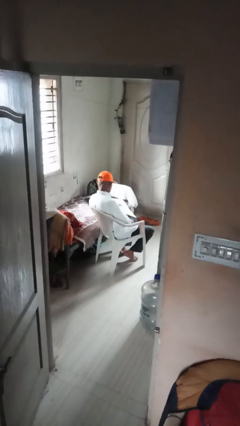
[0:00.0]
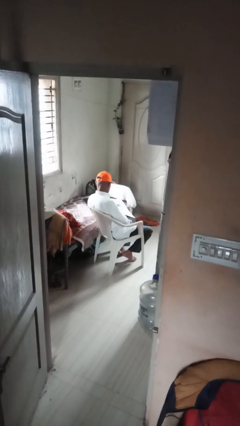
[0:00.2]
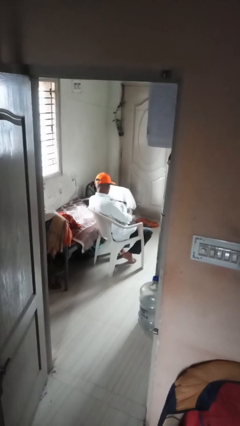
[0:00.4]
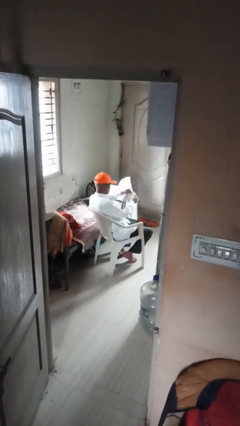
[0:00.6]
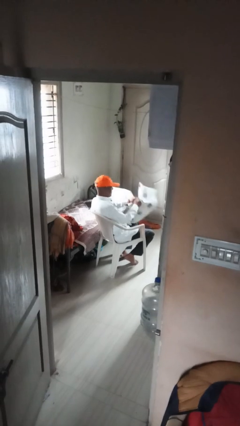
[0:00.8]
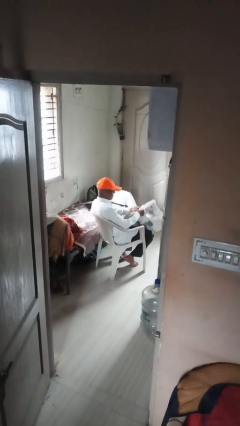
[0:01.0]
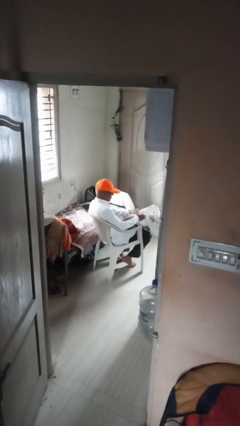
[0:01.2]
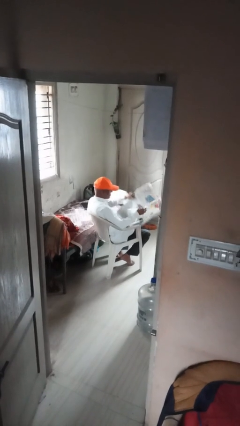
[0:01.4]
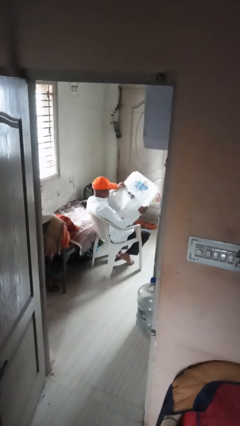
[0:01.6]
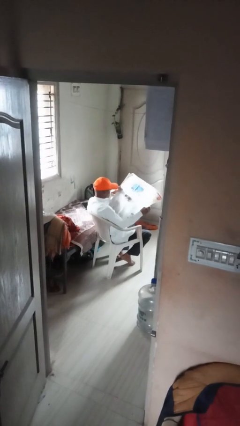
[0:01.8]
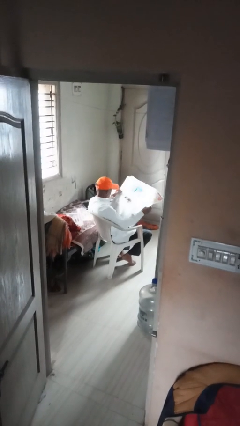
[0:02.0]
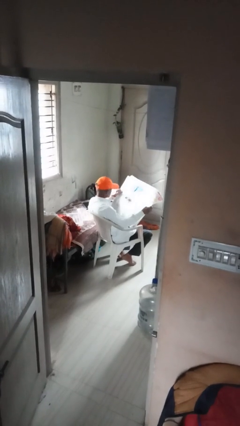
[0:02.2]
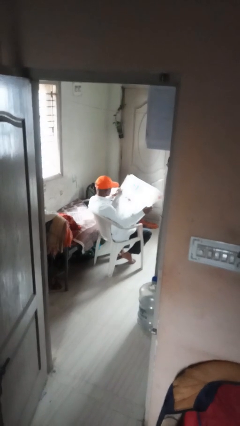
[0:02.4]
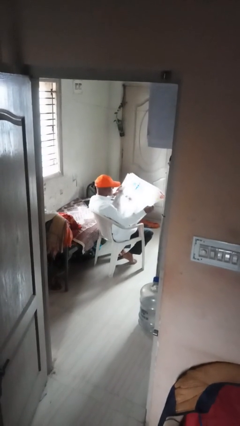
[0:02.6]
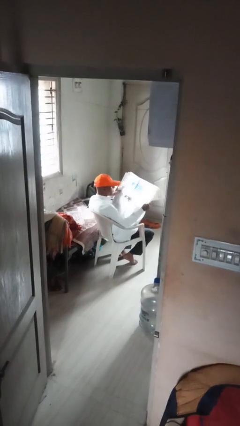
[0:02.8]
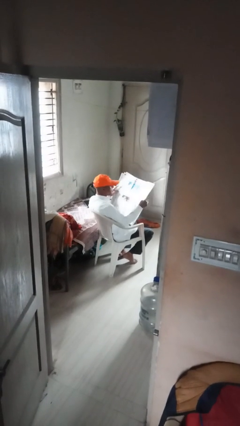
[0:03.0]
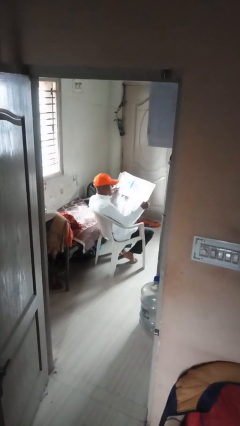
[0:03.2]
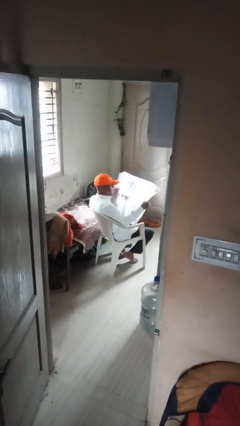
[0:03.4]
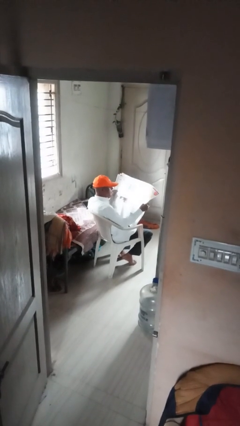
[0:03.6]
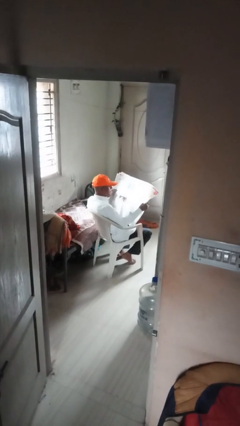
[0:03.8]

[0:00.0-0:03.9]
person reads newspaper

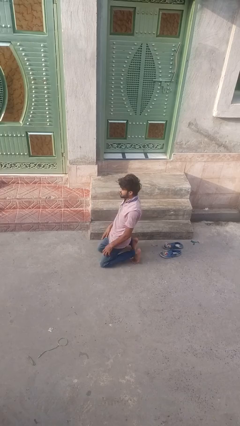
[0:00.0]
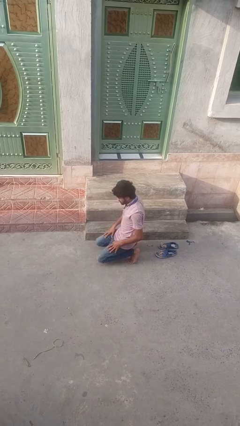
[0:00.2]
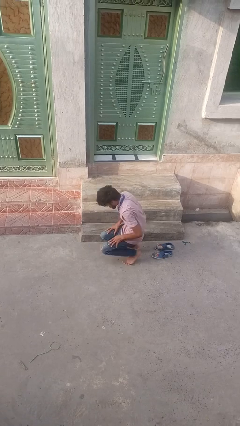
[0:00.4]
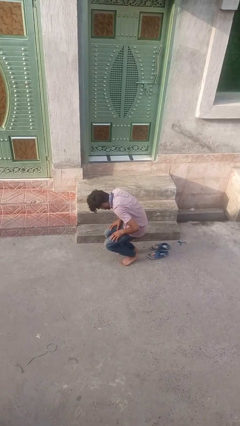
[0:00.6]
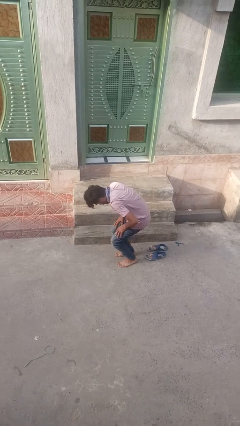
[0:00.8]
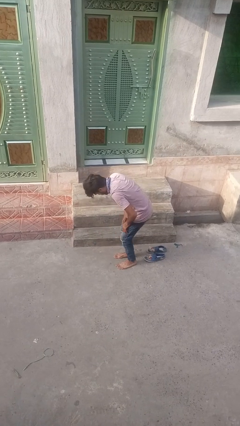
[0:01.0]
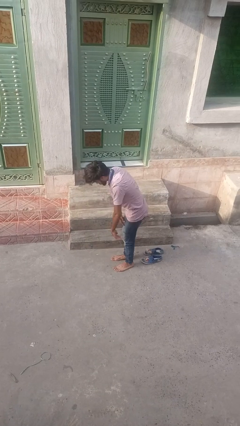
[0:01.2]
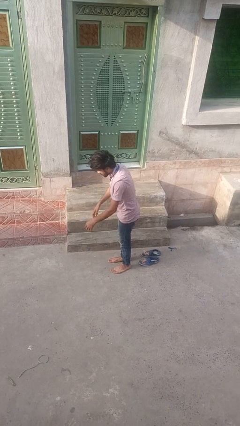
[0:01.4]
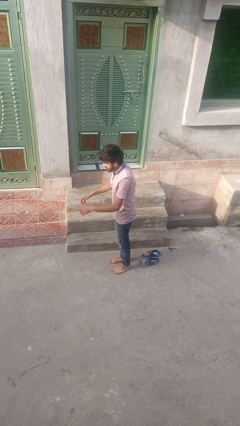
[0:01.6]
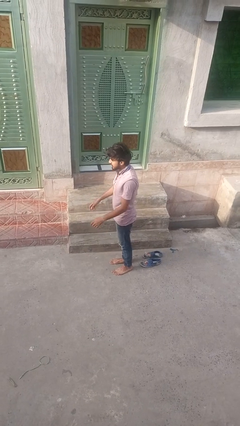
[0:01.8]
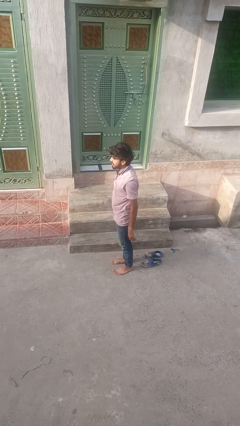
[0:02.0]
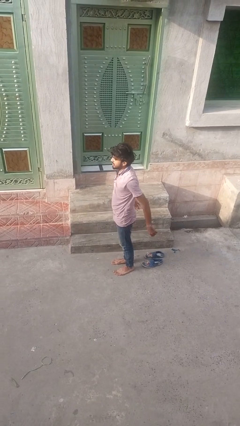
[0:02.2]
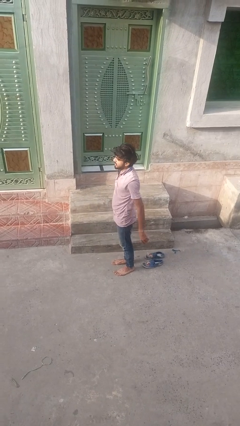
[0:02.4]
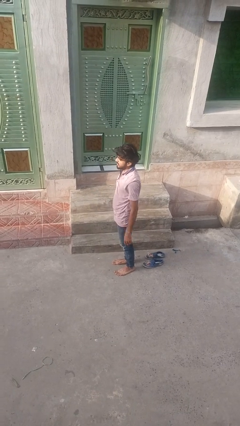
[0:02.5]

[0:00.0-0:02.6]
person stands up from floor

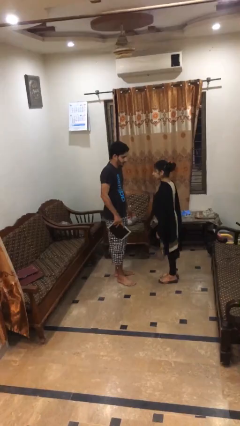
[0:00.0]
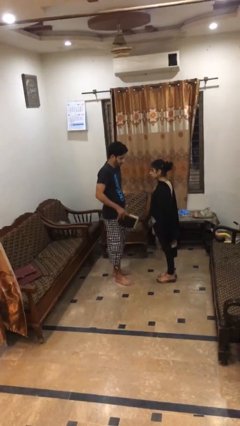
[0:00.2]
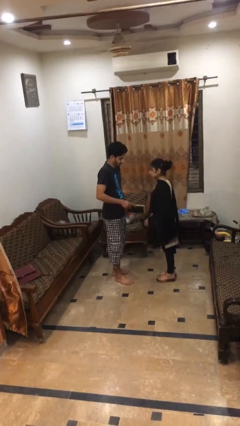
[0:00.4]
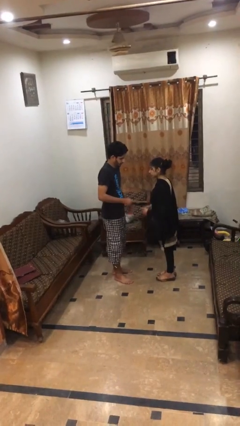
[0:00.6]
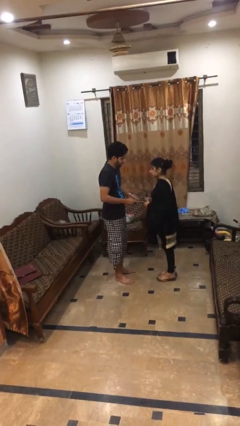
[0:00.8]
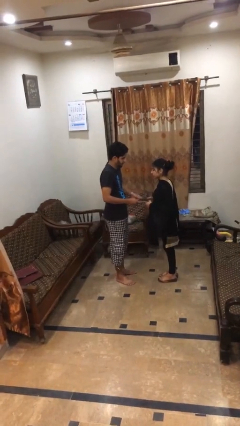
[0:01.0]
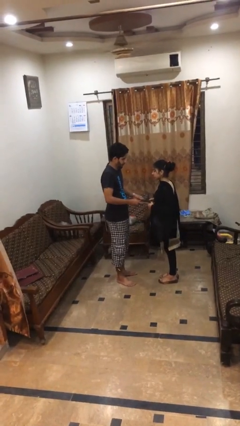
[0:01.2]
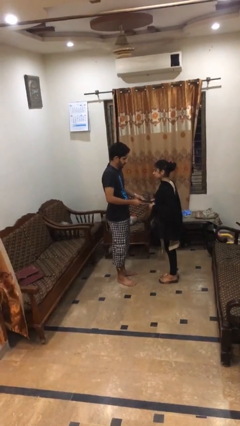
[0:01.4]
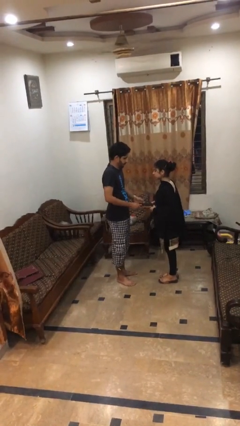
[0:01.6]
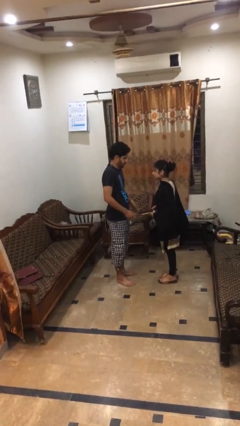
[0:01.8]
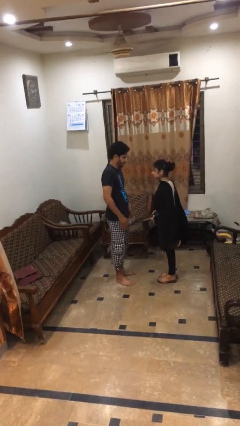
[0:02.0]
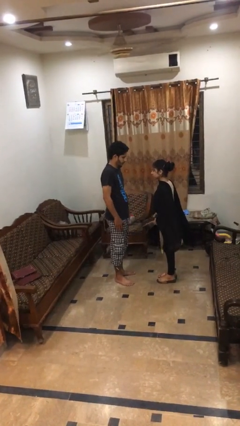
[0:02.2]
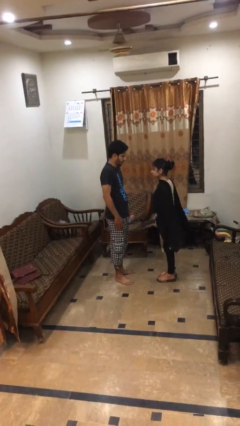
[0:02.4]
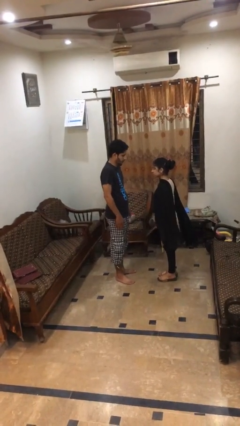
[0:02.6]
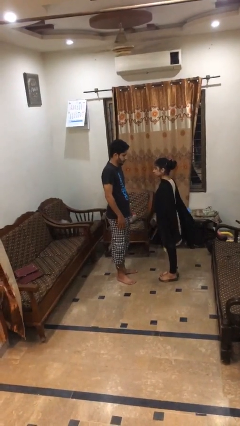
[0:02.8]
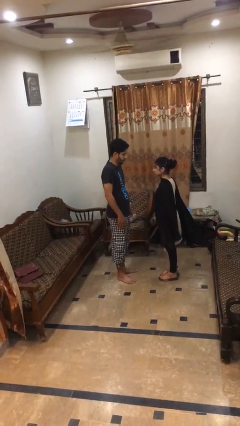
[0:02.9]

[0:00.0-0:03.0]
person transfers object to person

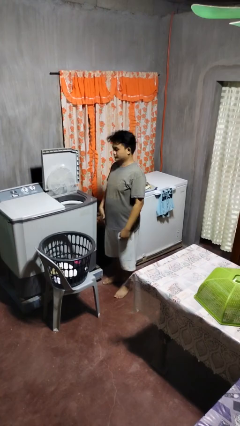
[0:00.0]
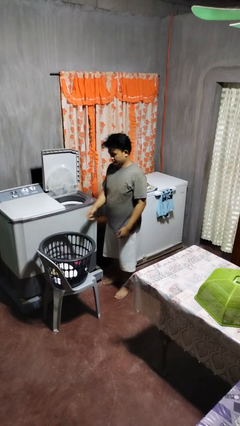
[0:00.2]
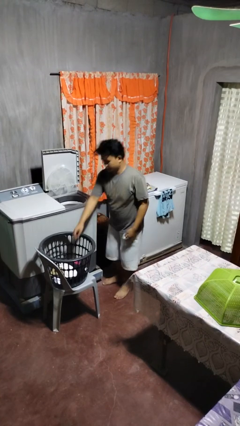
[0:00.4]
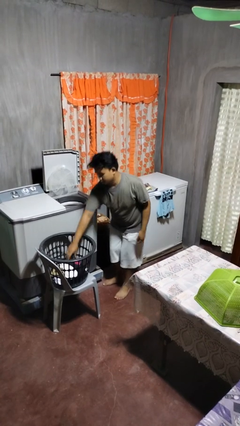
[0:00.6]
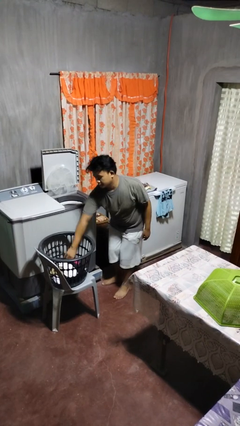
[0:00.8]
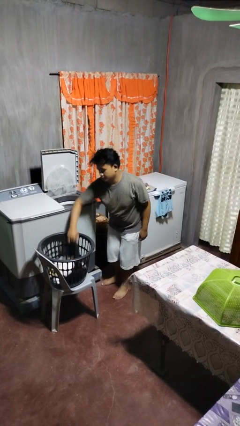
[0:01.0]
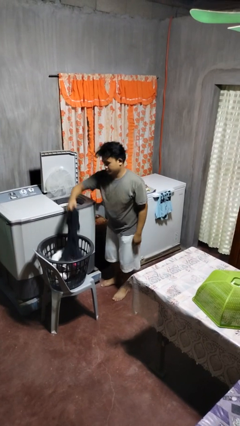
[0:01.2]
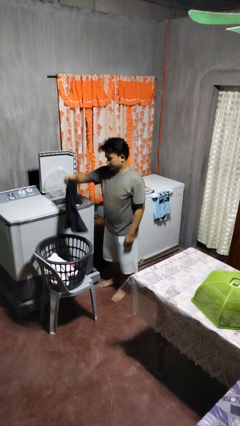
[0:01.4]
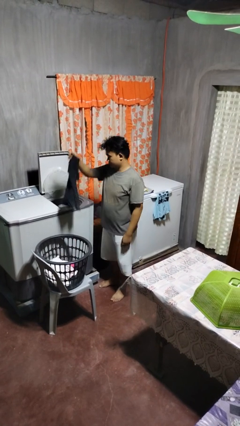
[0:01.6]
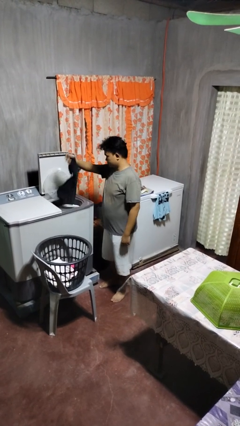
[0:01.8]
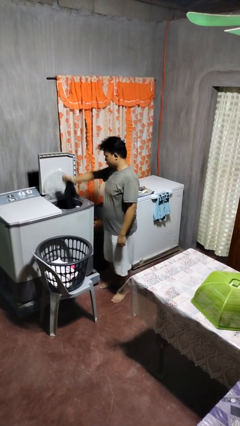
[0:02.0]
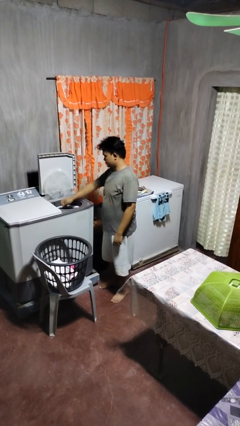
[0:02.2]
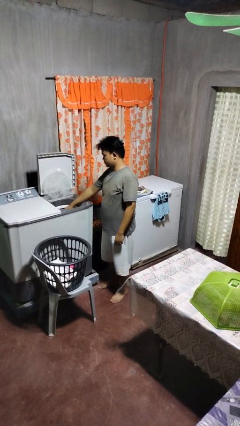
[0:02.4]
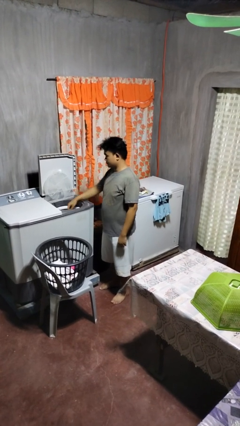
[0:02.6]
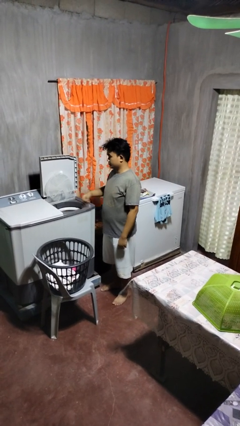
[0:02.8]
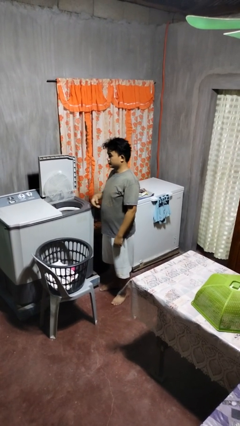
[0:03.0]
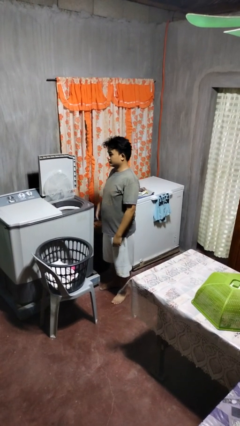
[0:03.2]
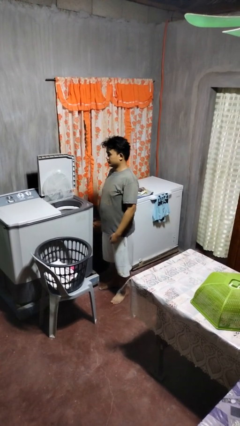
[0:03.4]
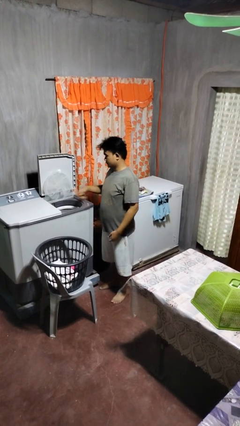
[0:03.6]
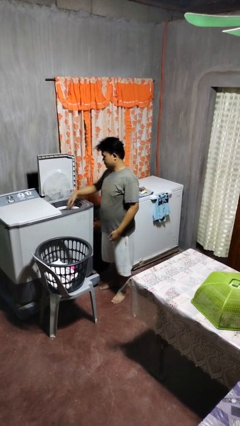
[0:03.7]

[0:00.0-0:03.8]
person loads dryer

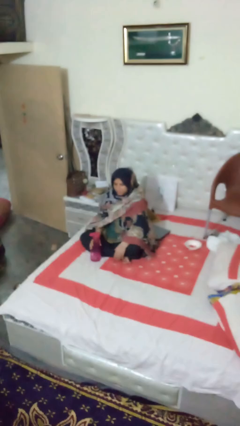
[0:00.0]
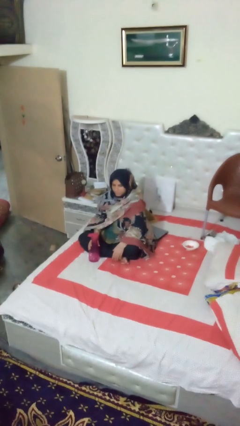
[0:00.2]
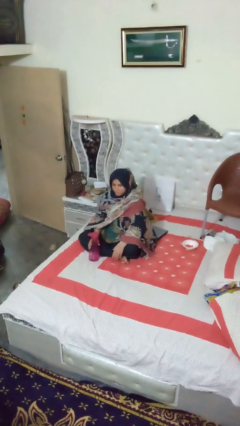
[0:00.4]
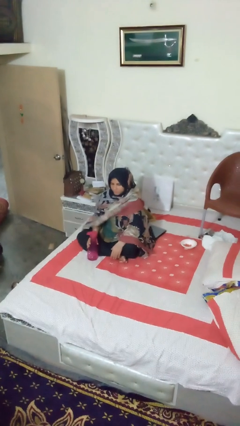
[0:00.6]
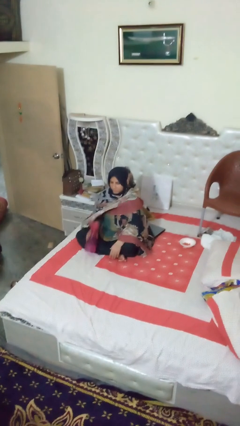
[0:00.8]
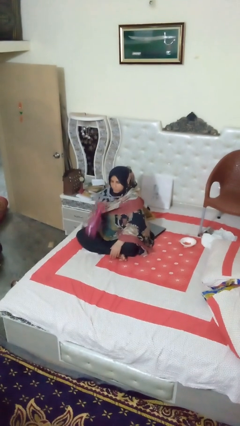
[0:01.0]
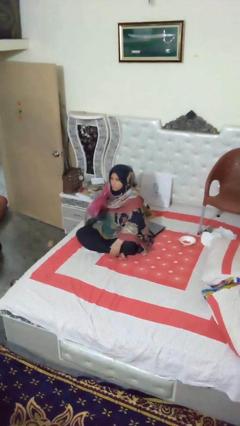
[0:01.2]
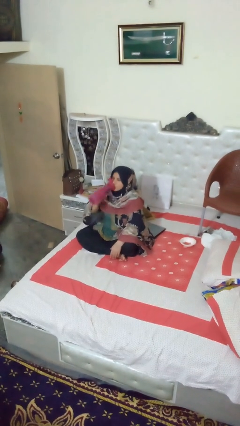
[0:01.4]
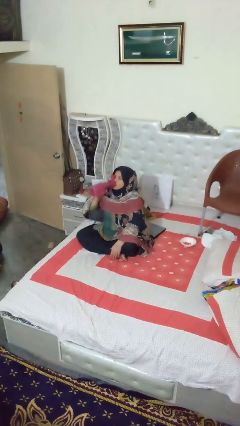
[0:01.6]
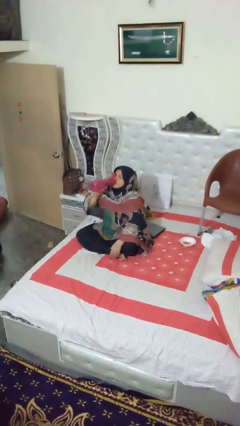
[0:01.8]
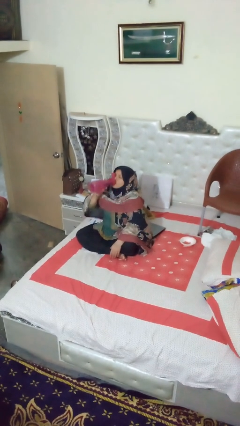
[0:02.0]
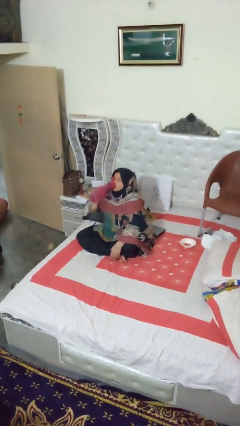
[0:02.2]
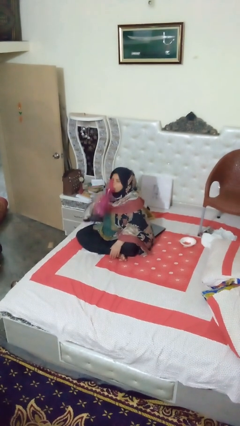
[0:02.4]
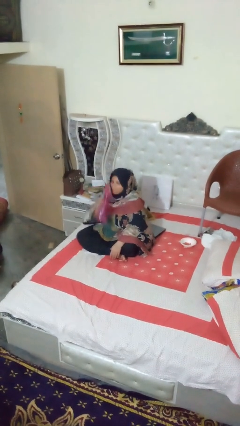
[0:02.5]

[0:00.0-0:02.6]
person drinks from bottle

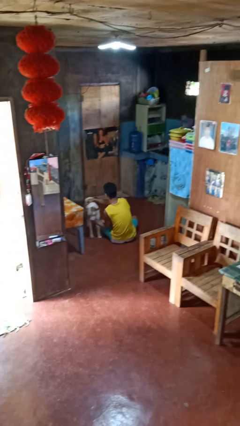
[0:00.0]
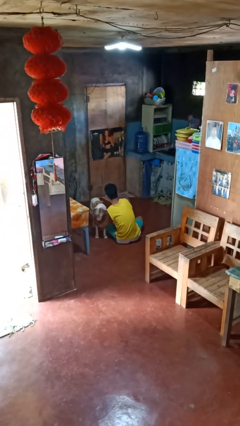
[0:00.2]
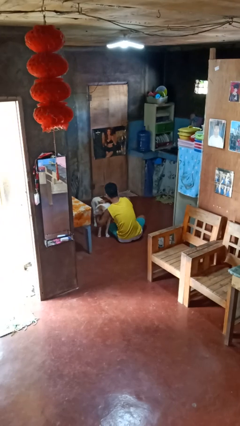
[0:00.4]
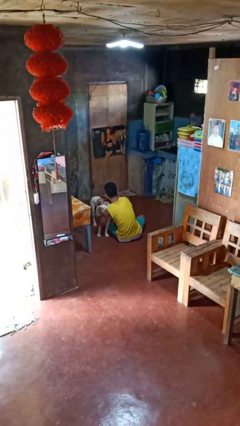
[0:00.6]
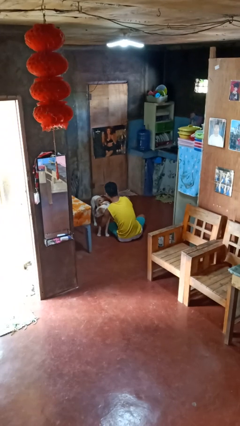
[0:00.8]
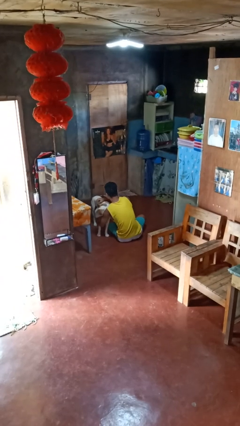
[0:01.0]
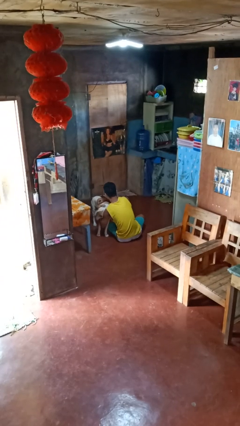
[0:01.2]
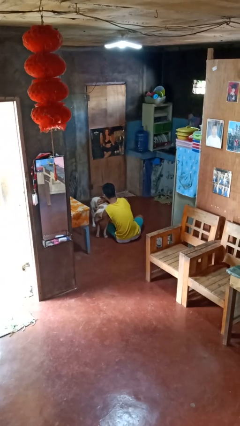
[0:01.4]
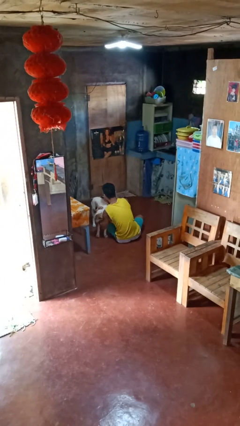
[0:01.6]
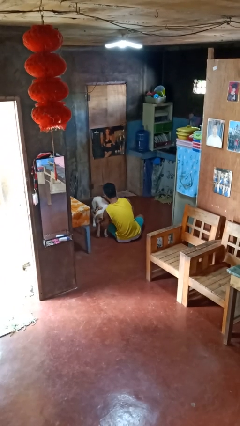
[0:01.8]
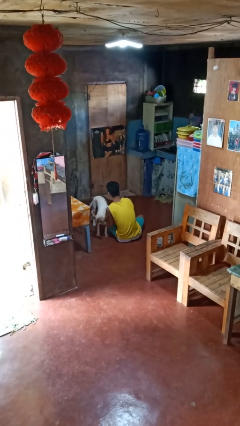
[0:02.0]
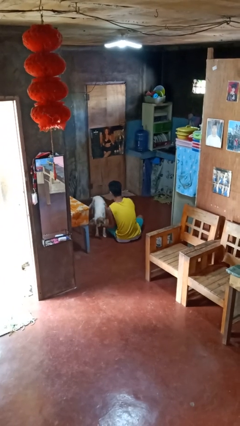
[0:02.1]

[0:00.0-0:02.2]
person hugs dog
